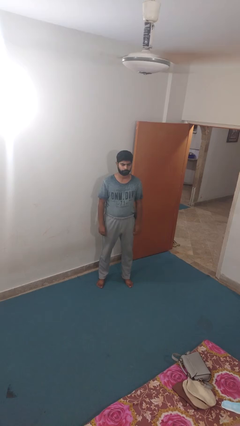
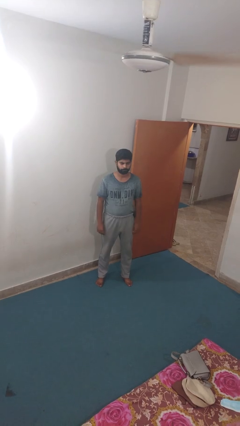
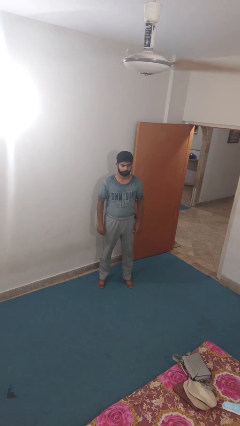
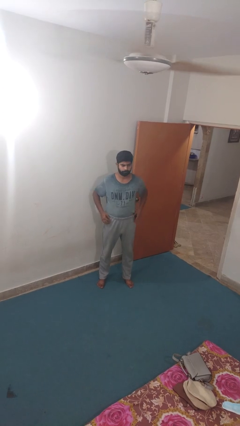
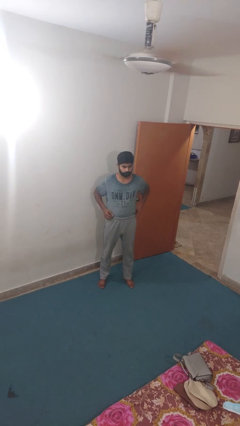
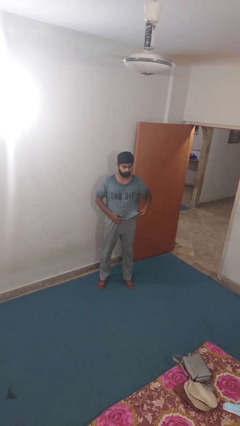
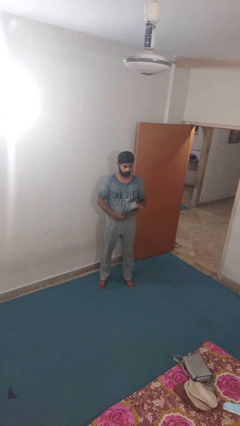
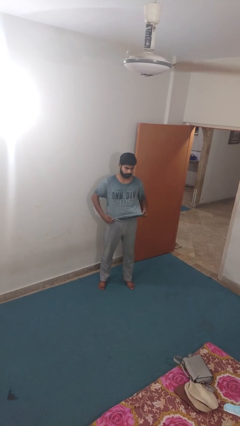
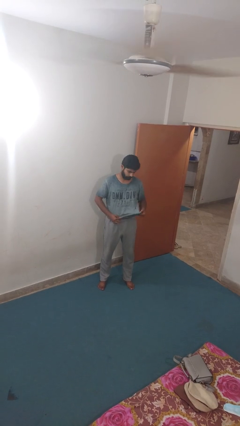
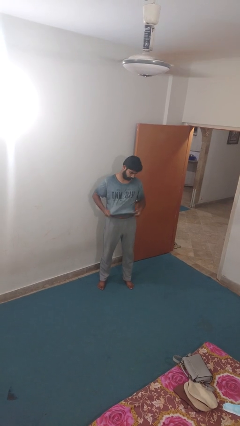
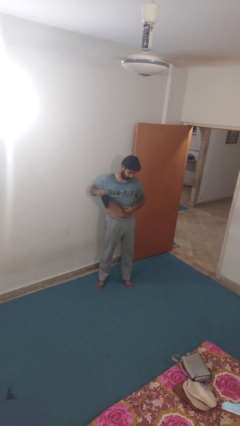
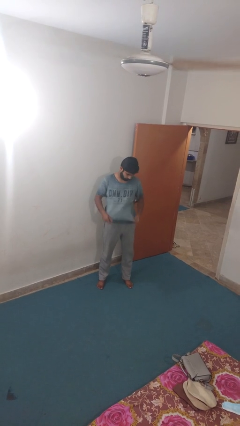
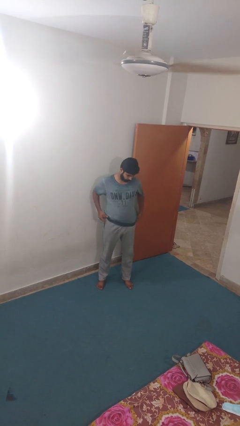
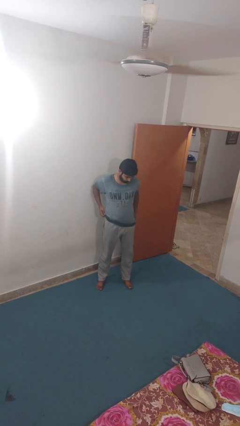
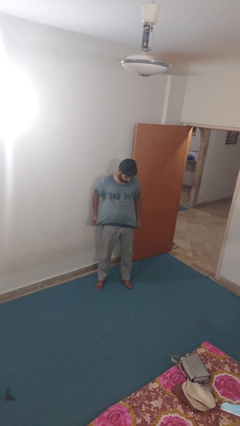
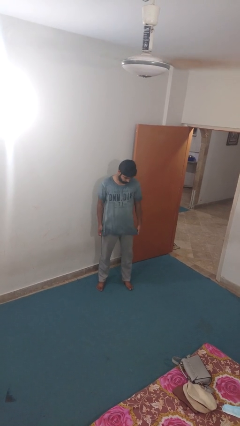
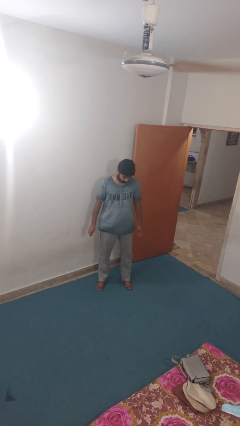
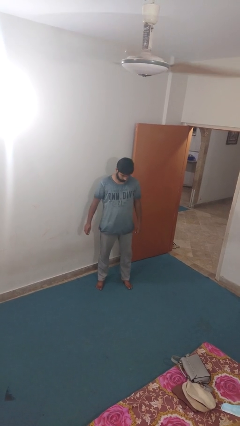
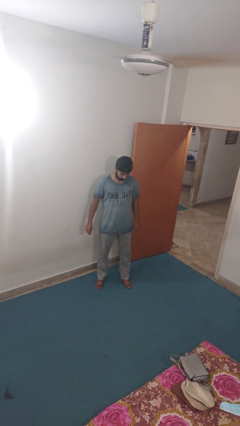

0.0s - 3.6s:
person untucks shirt

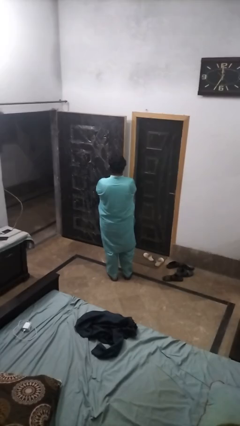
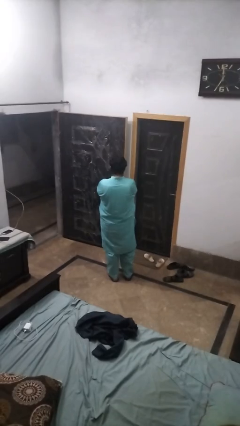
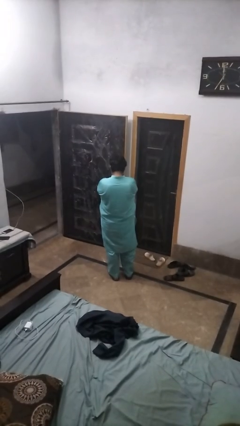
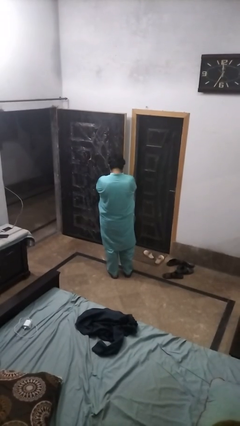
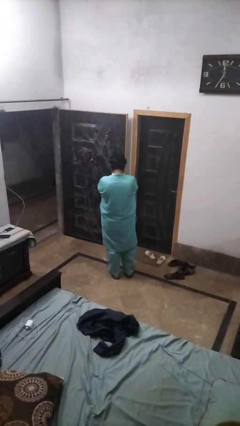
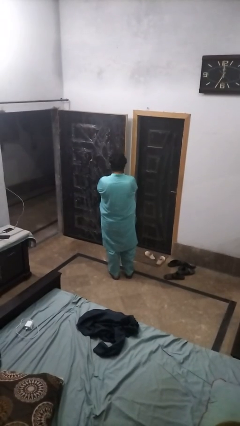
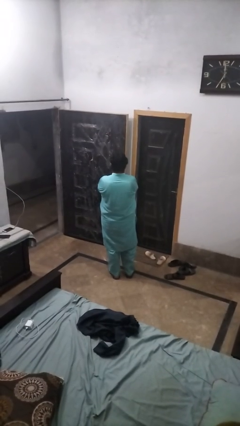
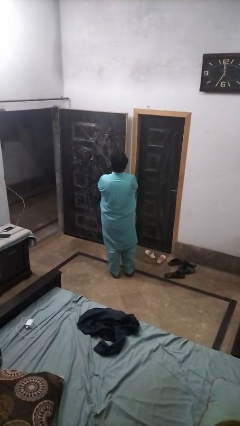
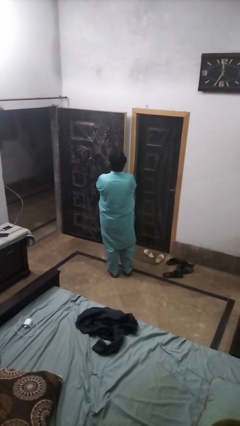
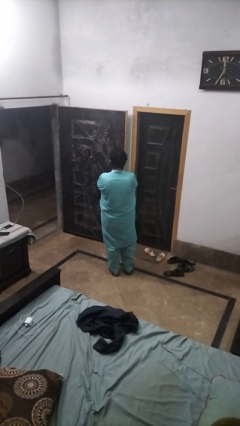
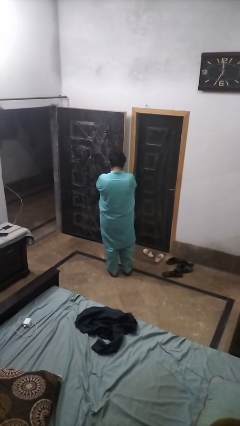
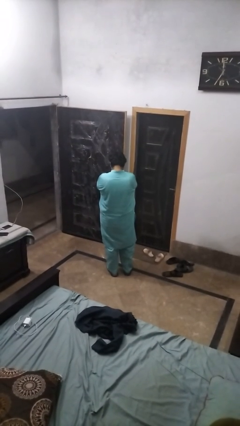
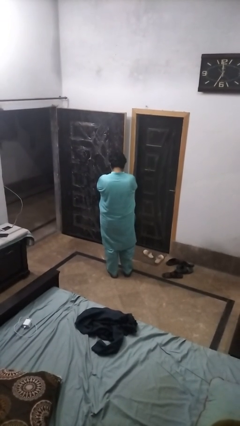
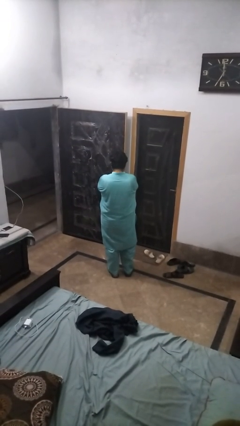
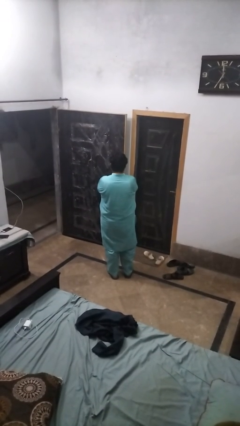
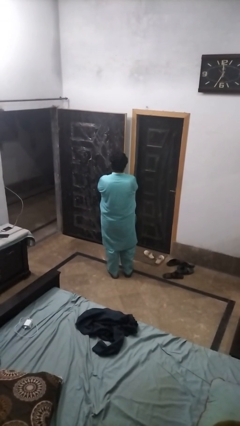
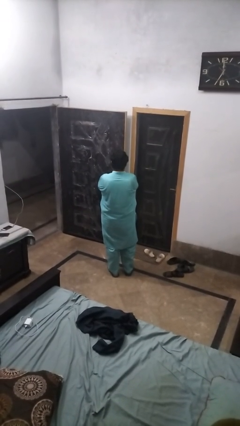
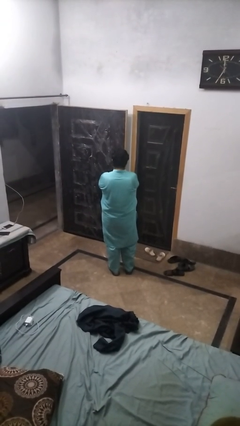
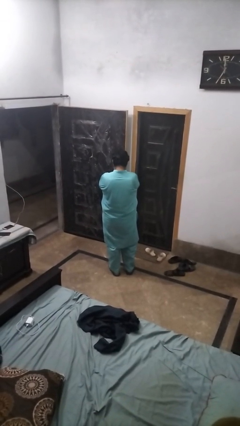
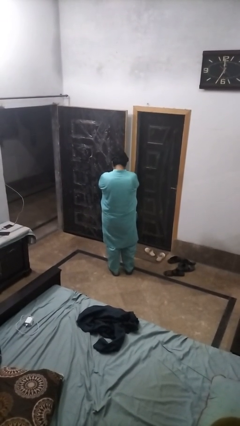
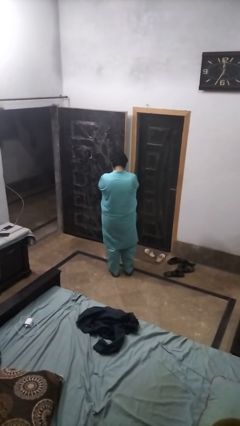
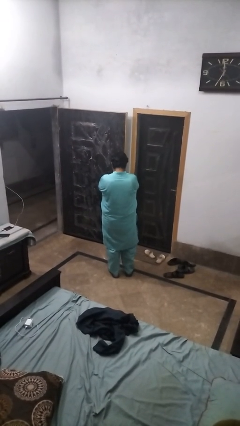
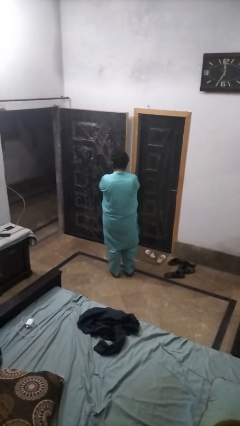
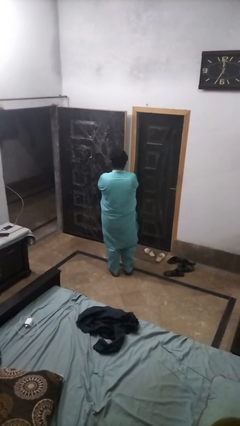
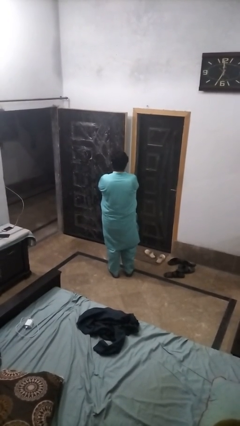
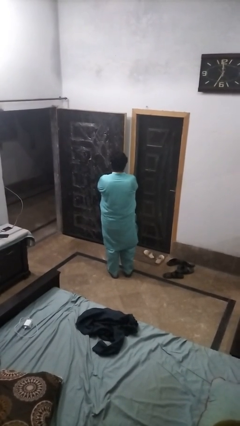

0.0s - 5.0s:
person nods head

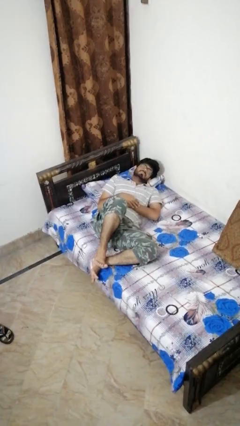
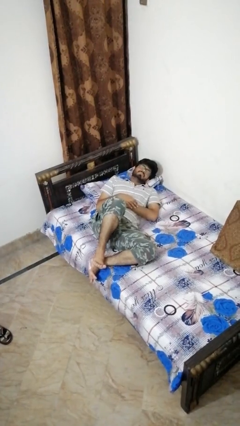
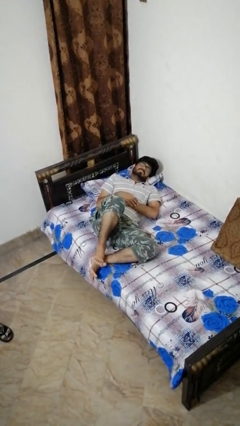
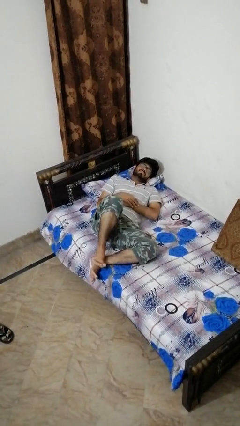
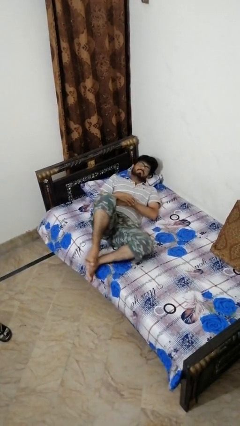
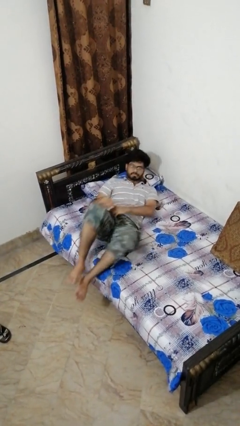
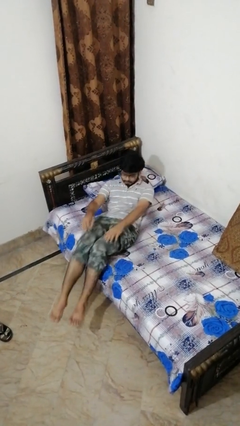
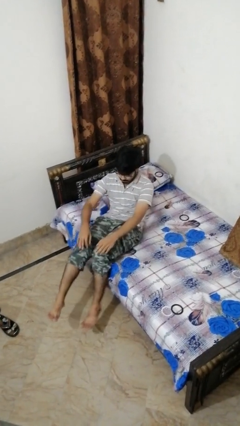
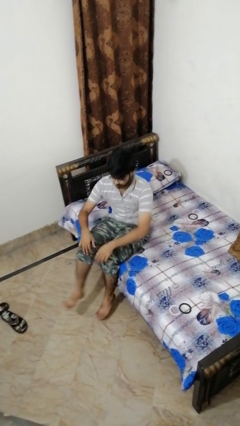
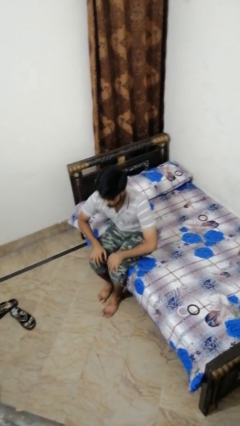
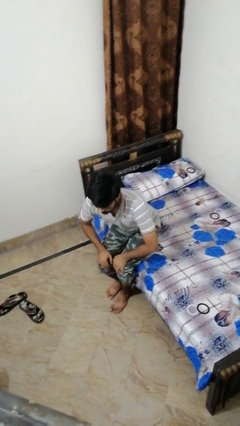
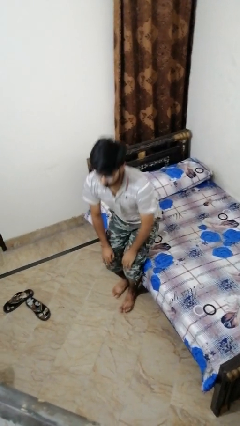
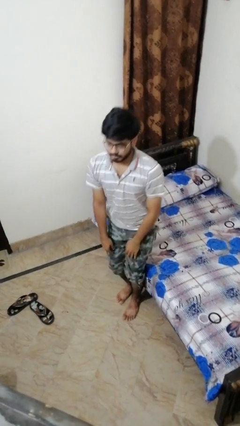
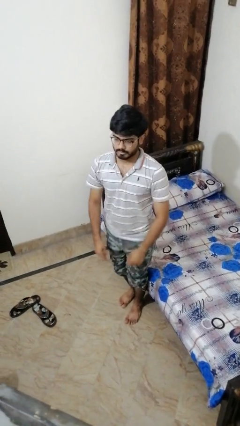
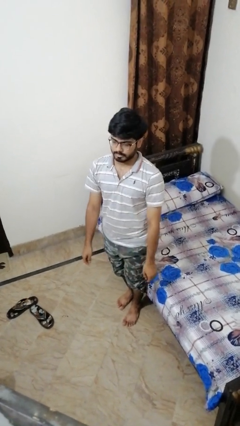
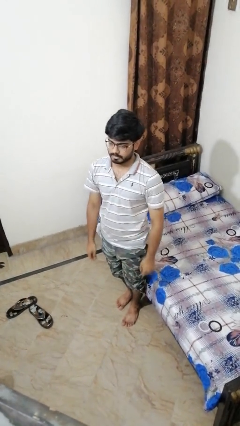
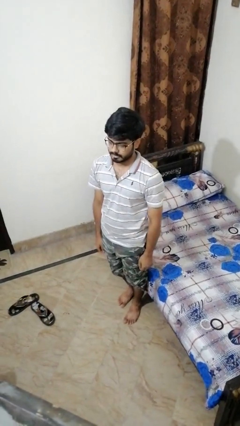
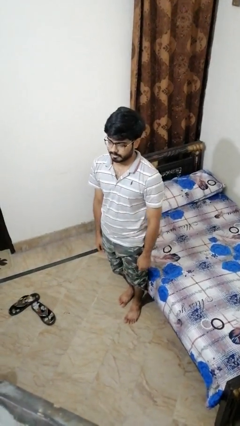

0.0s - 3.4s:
person stands up

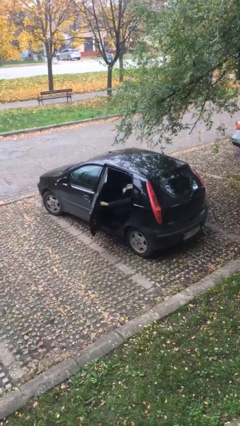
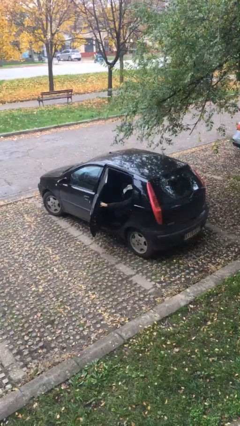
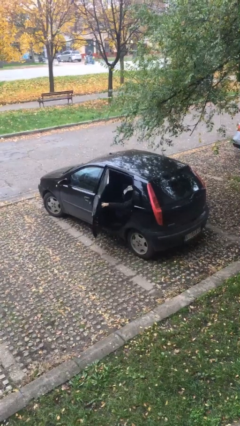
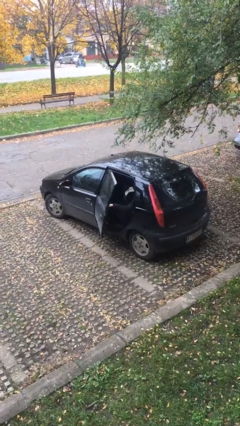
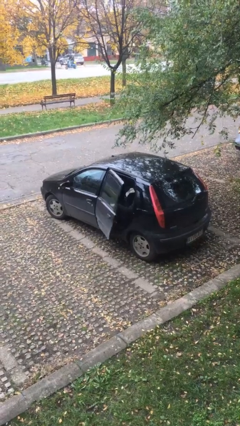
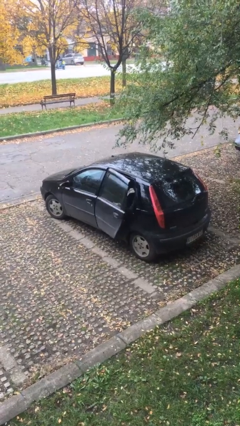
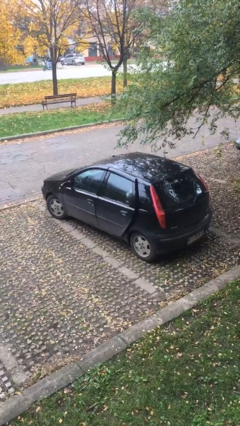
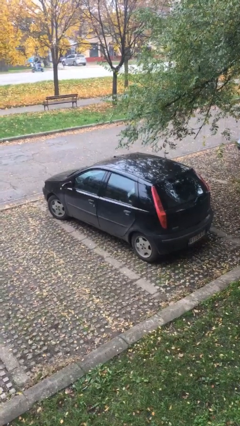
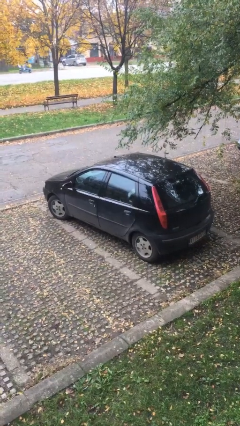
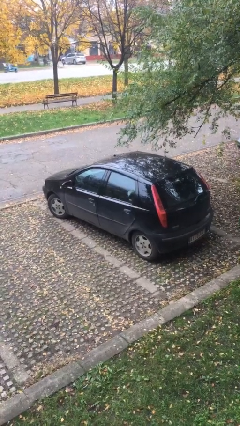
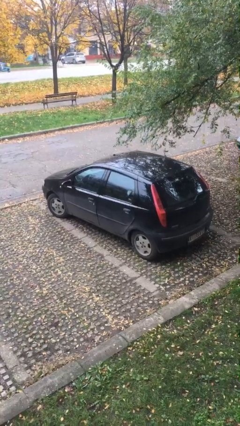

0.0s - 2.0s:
person closes car door

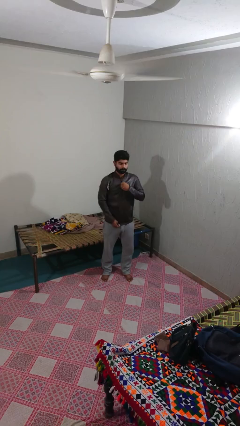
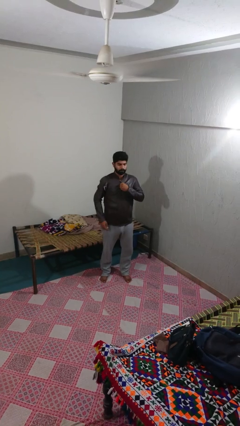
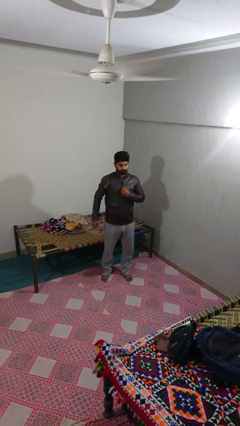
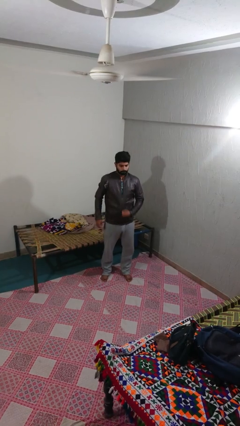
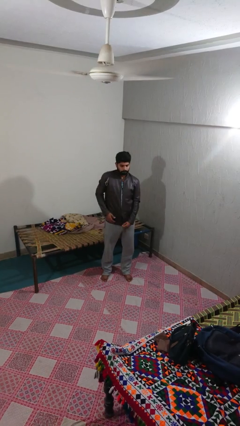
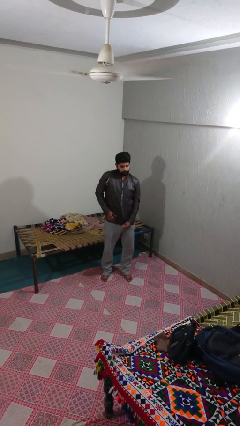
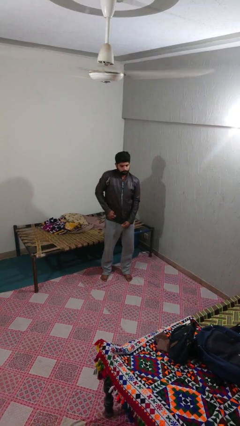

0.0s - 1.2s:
person unzips jacket

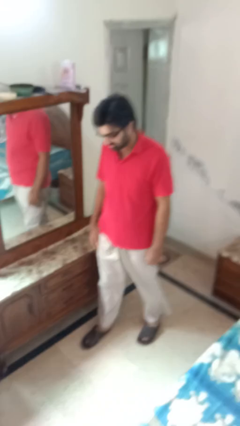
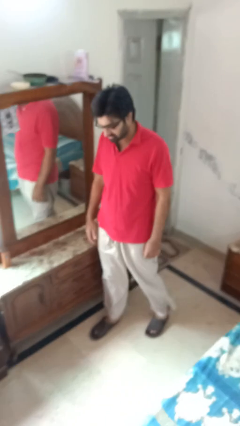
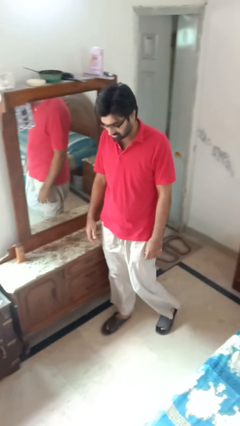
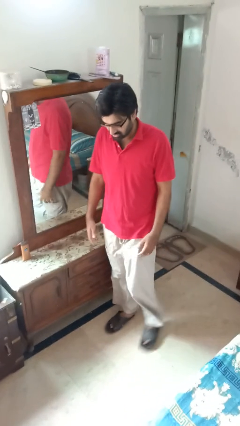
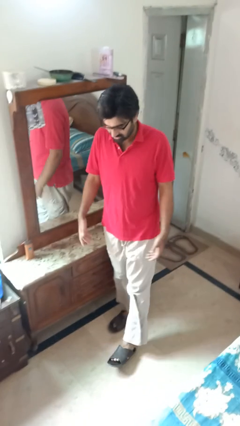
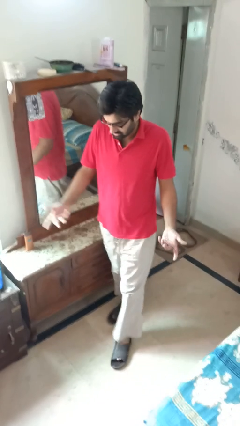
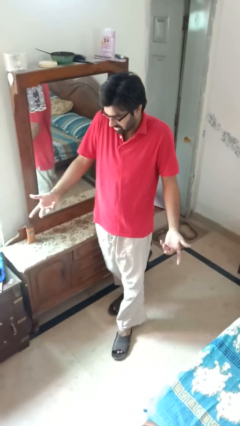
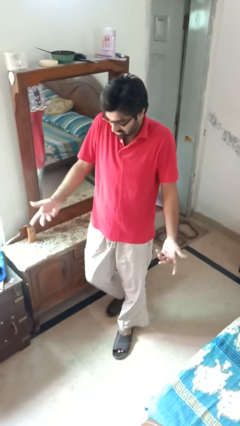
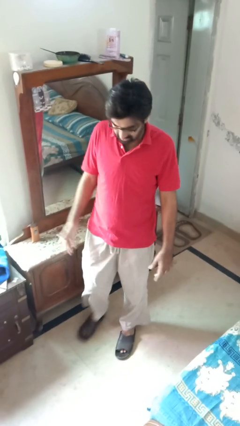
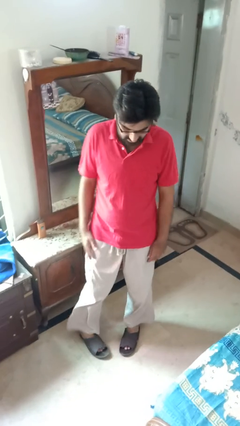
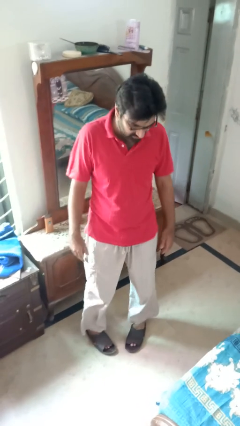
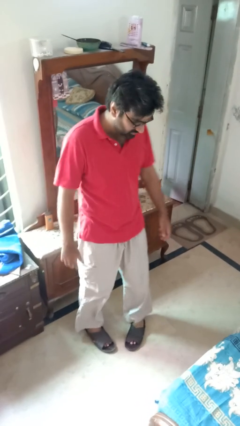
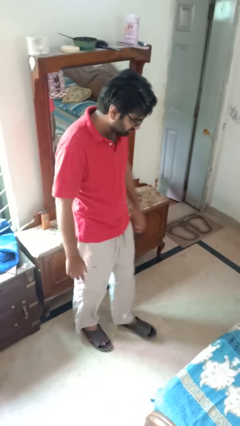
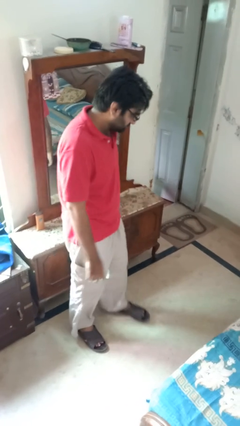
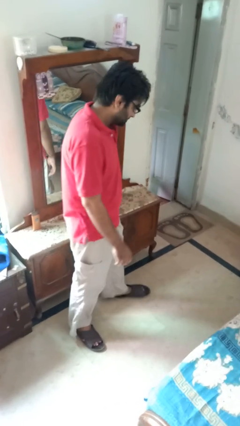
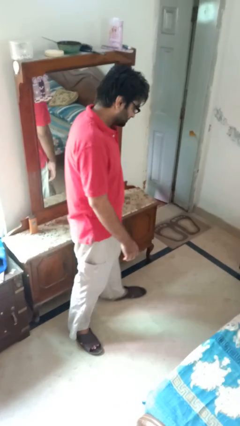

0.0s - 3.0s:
person shrugs
